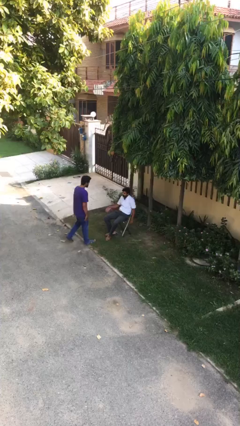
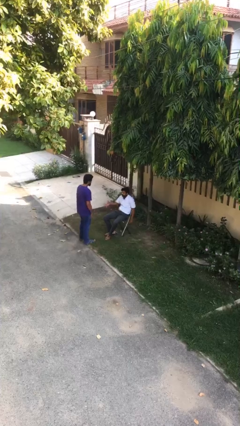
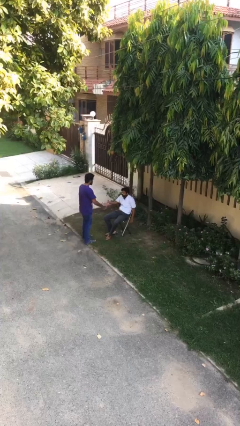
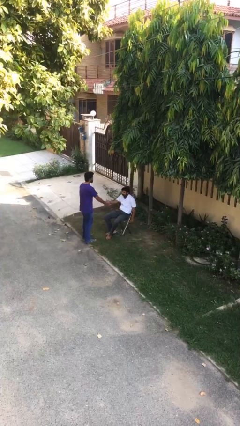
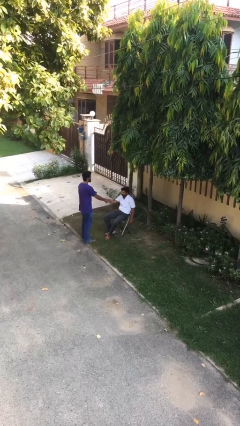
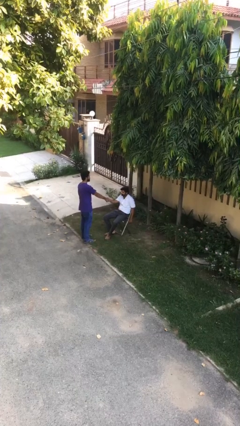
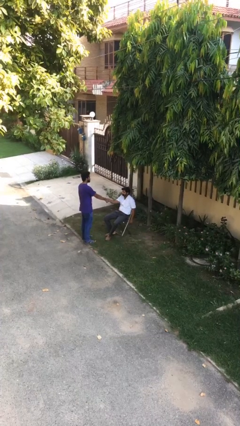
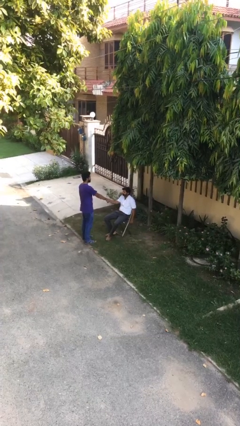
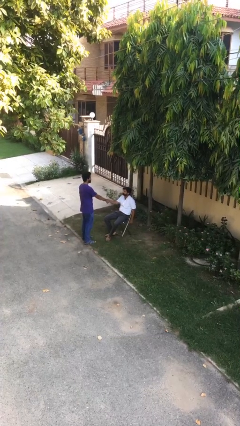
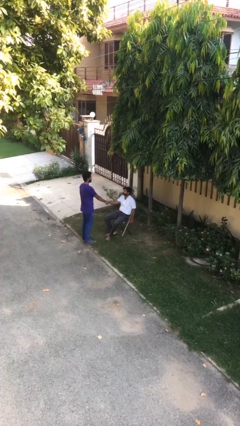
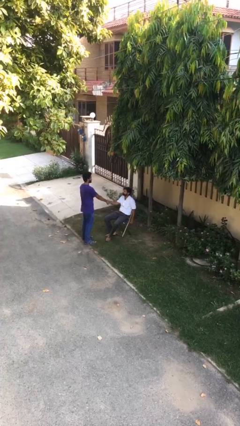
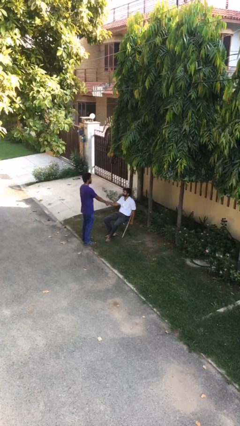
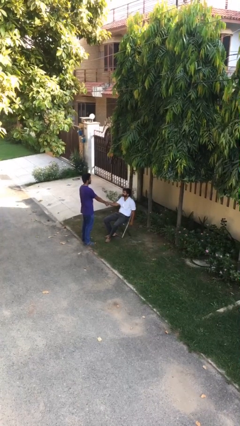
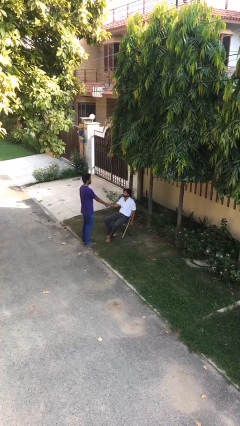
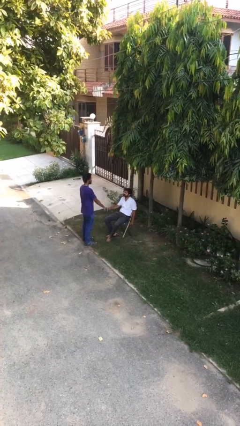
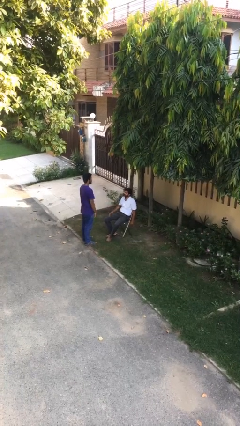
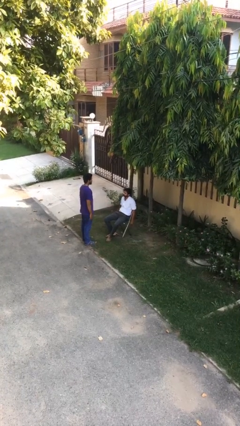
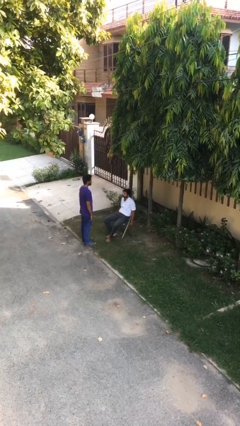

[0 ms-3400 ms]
person shakes hand

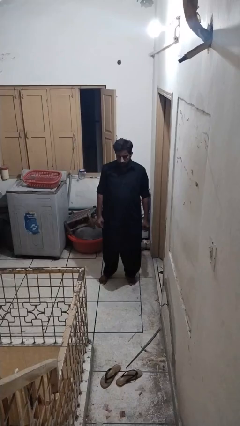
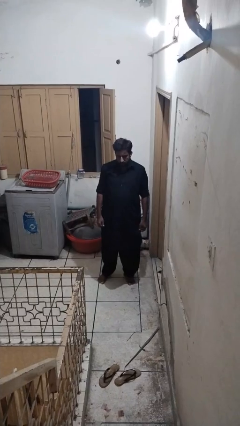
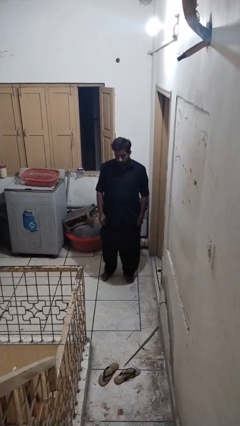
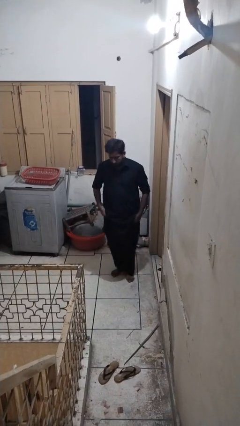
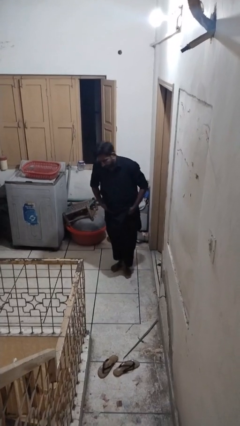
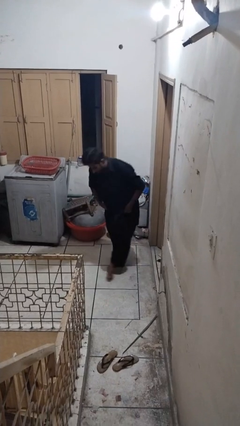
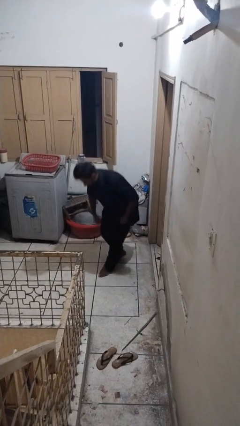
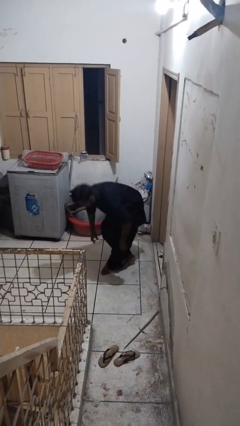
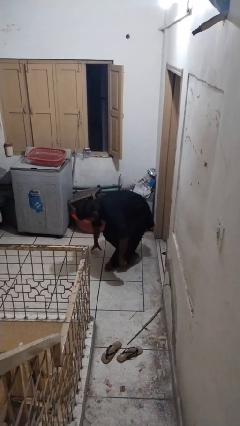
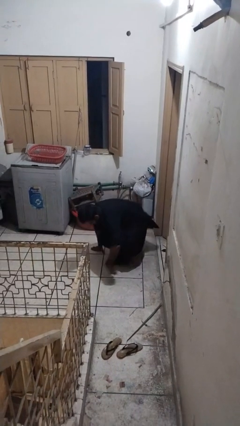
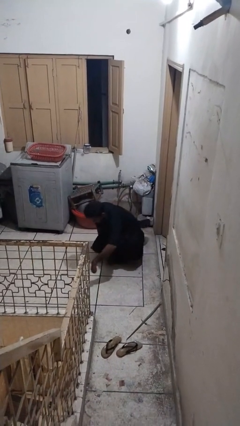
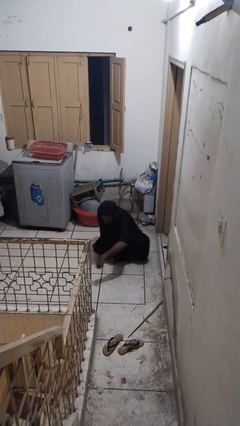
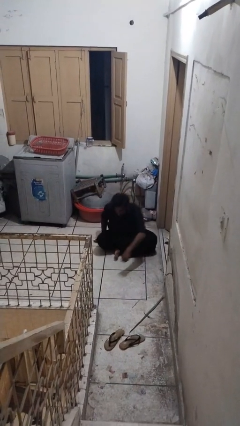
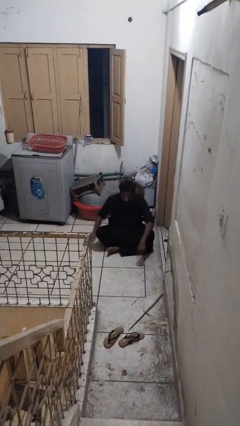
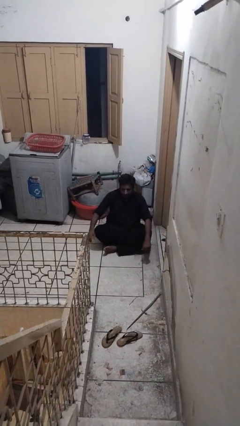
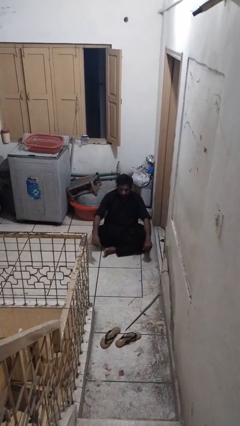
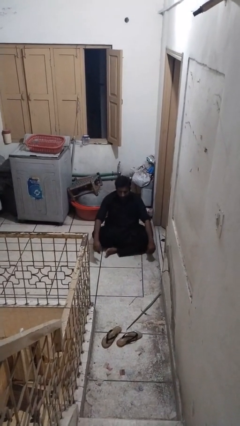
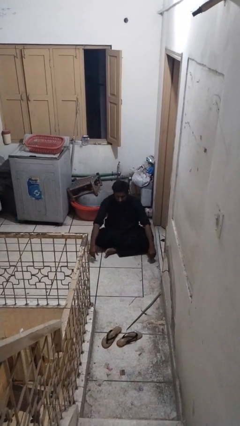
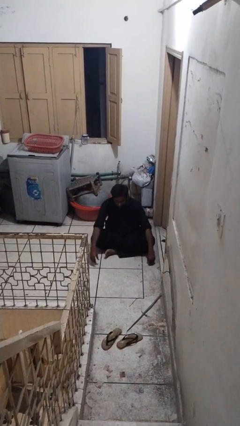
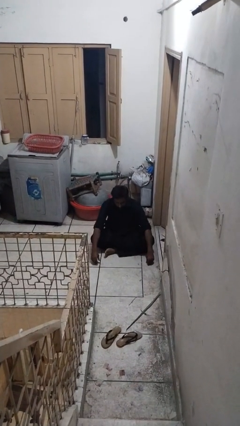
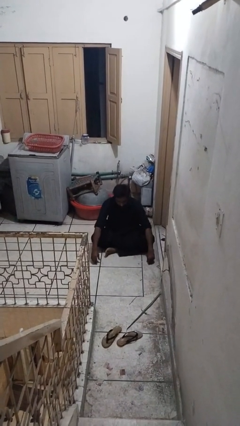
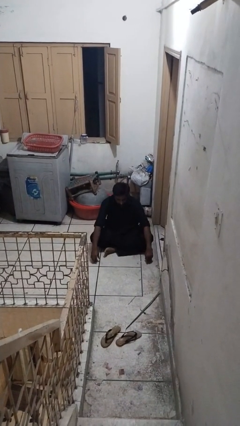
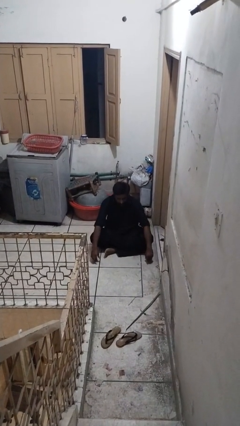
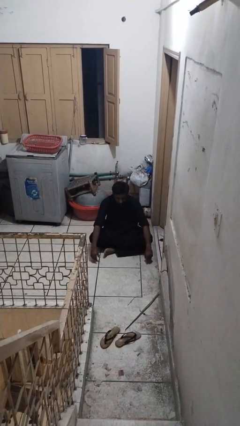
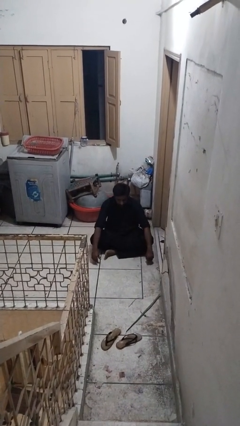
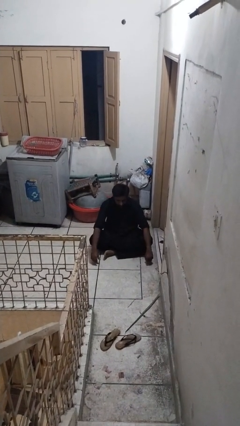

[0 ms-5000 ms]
person sits crisscross

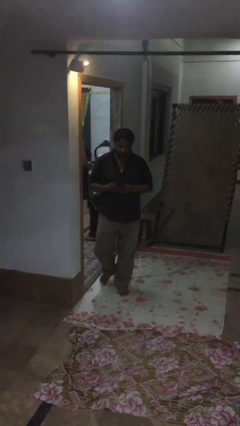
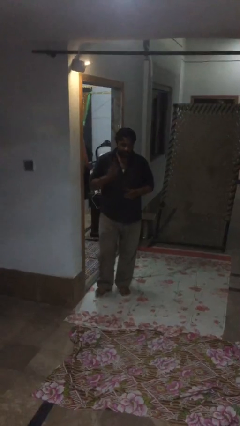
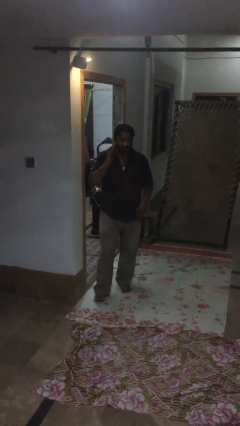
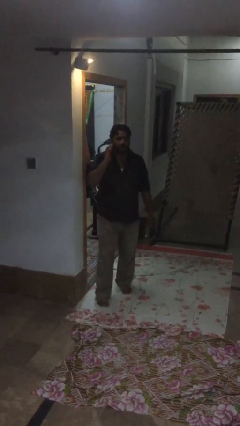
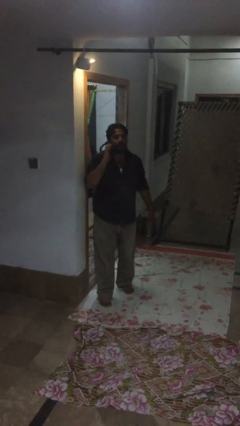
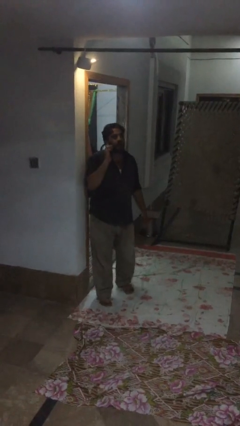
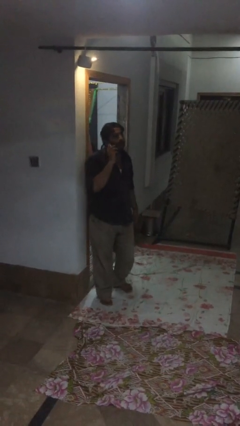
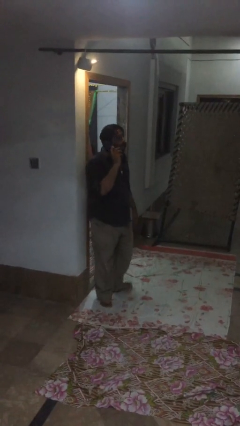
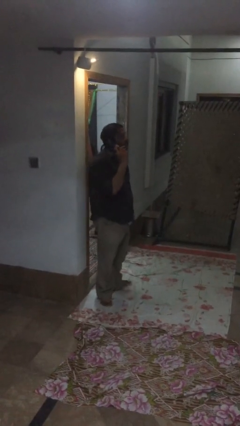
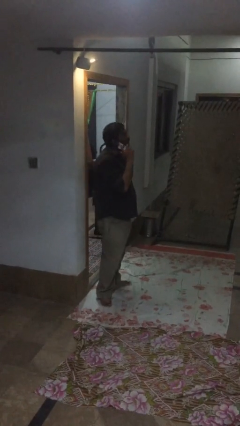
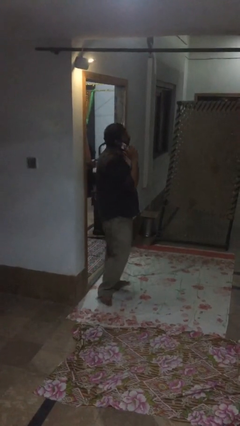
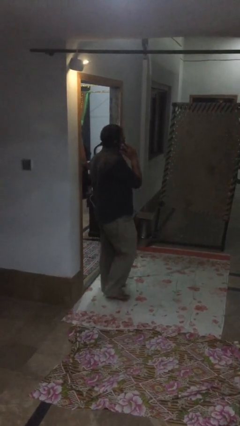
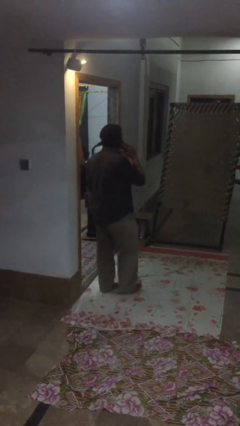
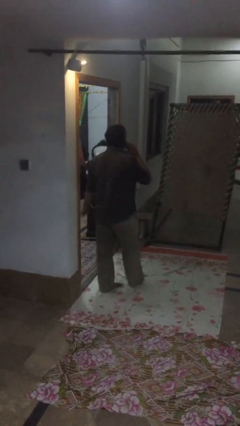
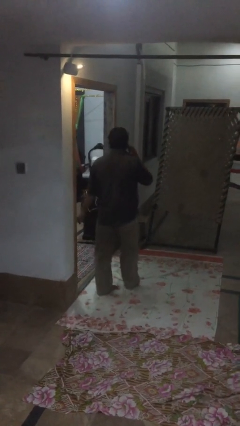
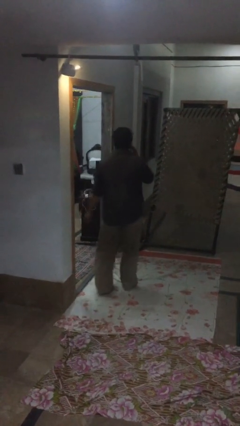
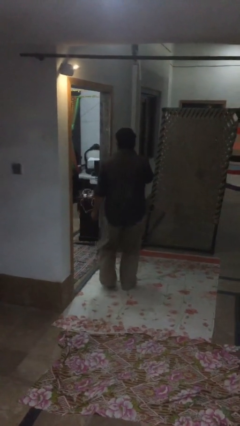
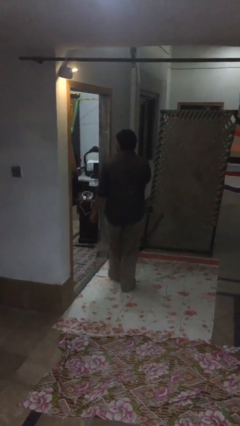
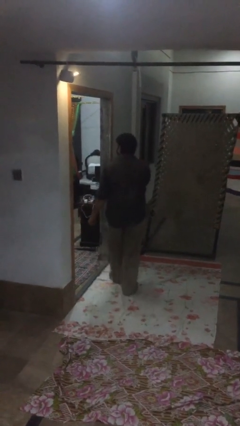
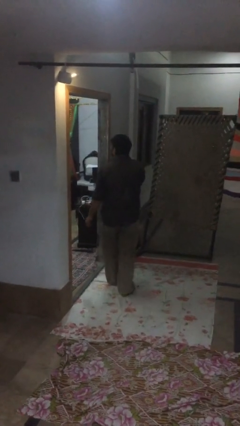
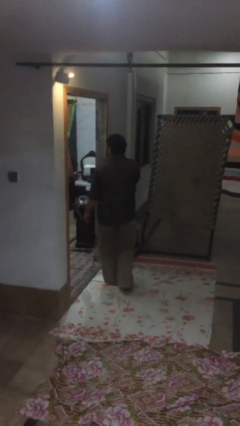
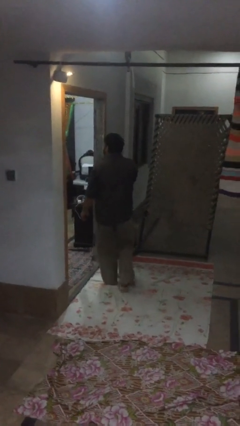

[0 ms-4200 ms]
person talks on phone

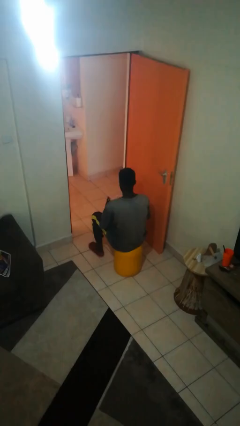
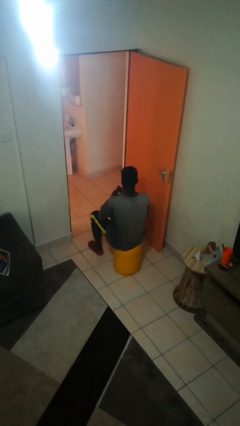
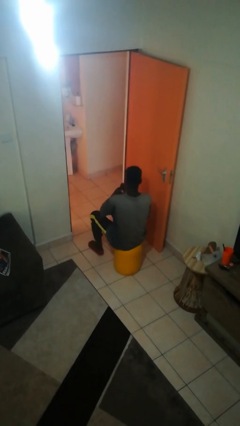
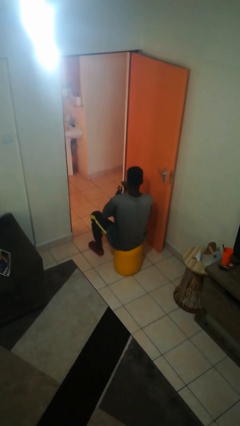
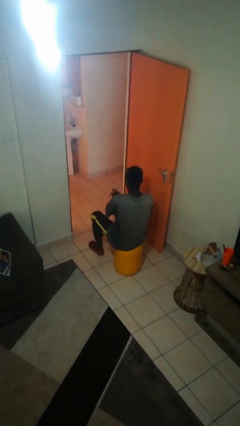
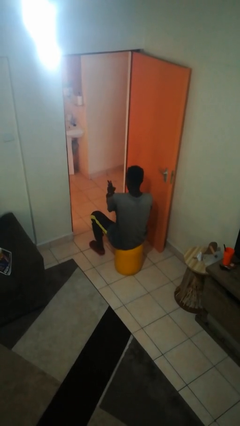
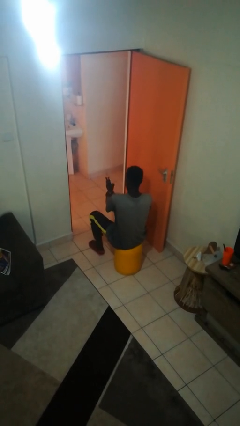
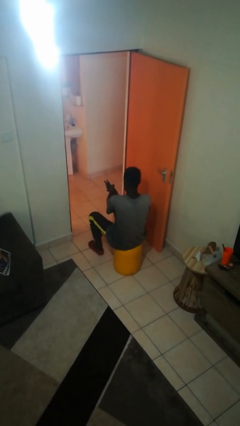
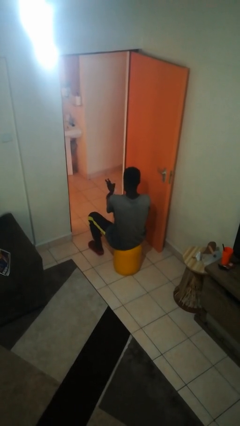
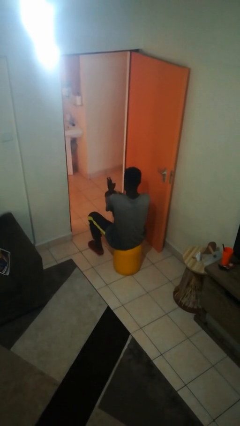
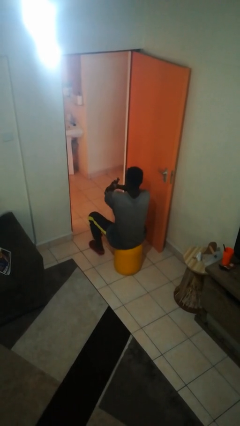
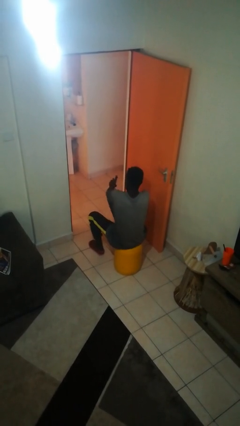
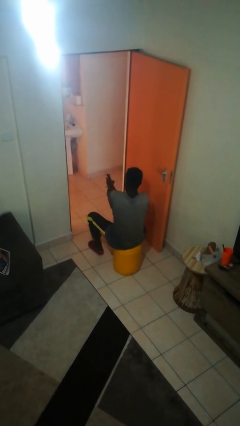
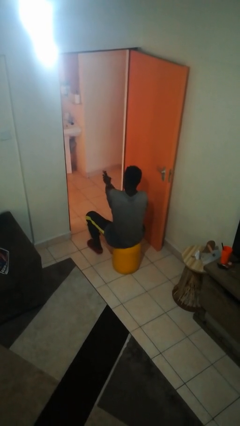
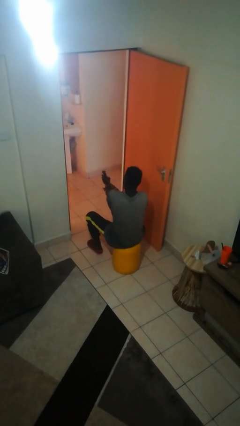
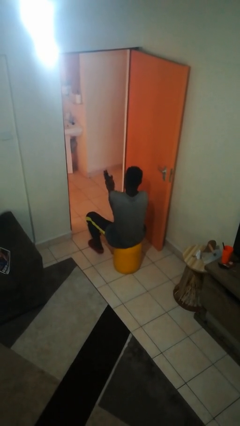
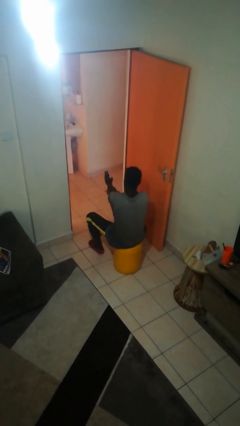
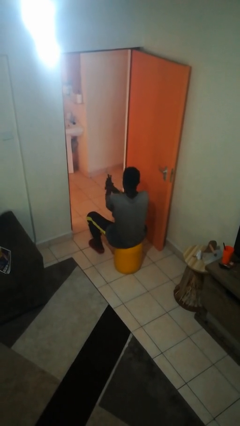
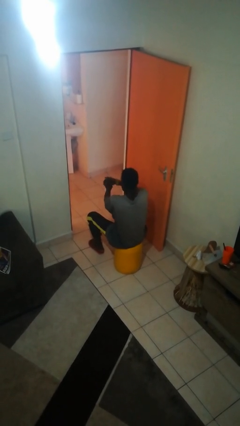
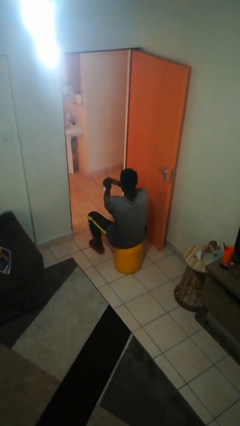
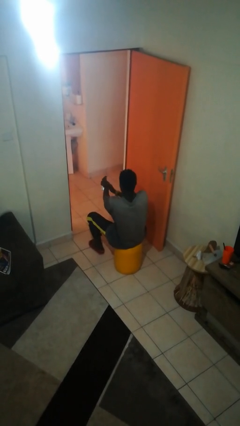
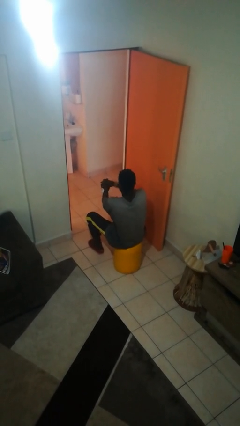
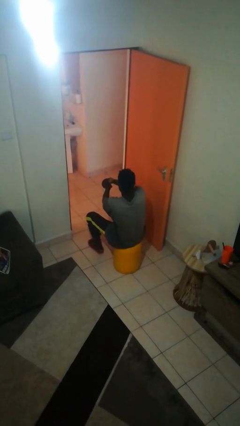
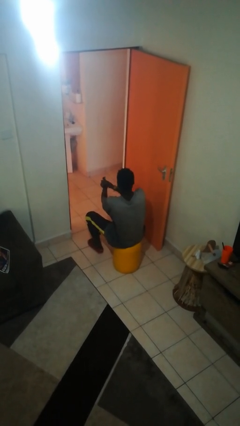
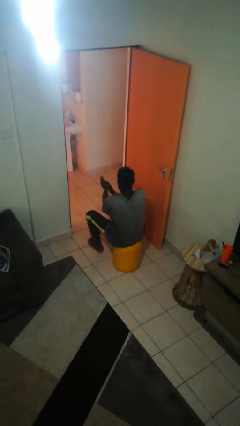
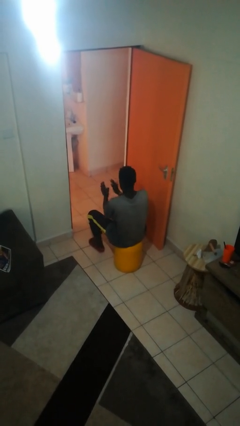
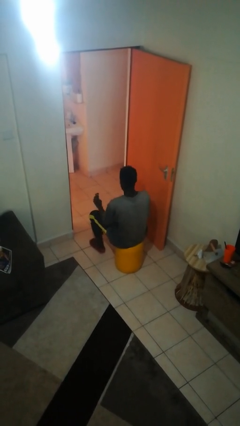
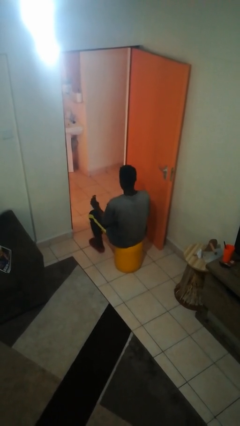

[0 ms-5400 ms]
person applies sunscreen
